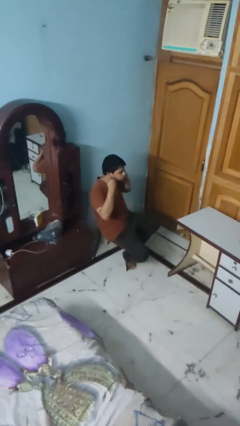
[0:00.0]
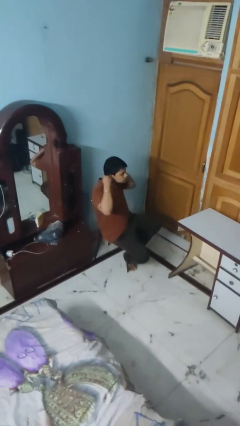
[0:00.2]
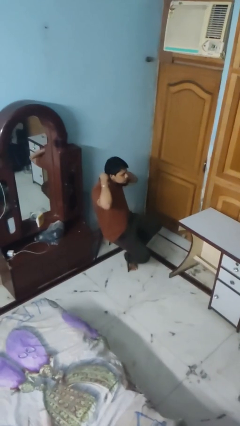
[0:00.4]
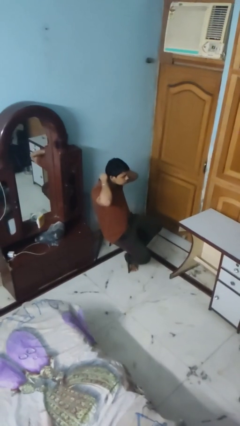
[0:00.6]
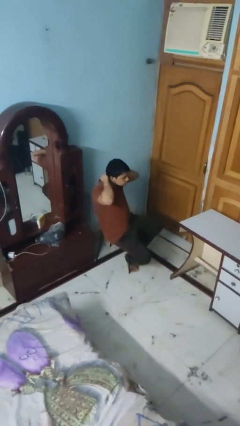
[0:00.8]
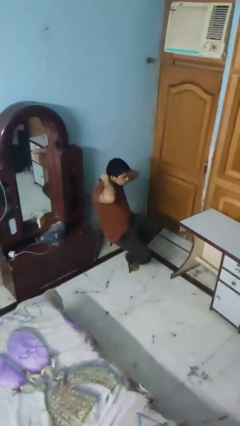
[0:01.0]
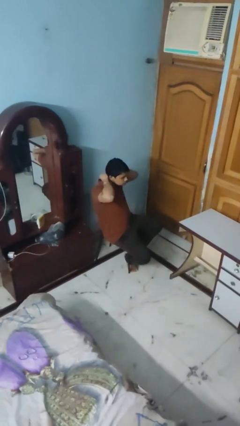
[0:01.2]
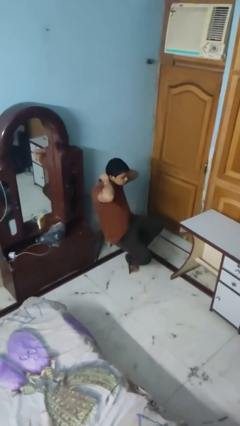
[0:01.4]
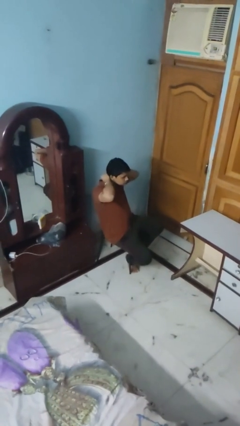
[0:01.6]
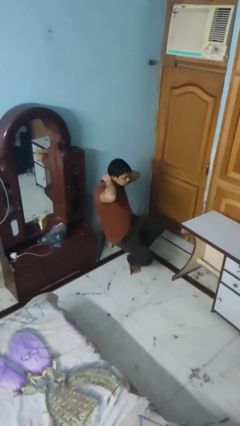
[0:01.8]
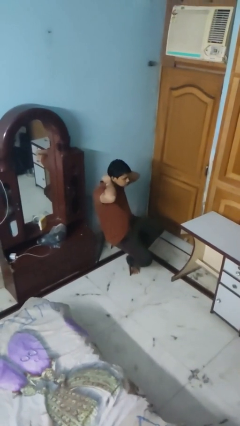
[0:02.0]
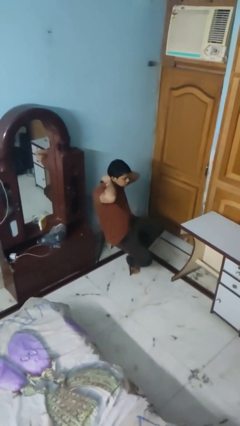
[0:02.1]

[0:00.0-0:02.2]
person puts on necklace

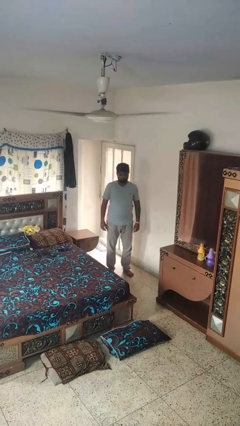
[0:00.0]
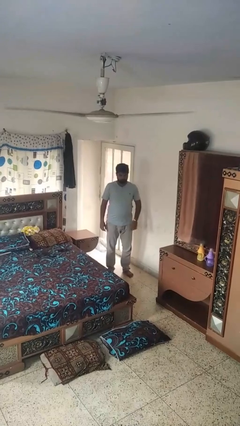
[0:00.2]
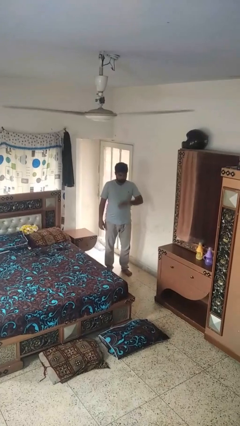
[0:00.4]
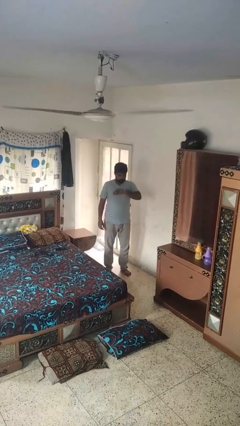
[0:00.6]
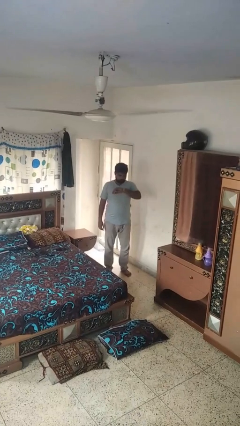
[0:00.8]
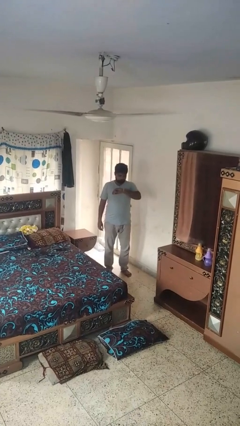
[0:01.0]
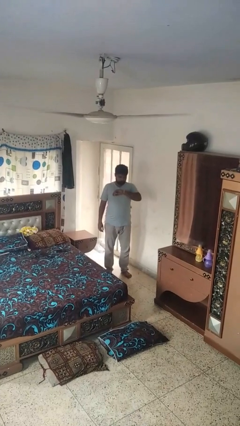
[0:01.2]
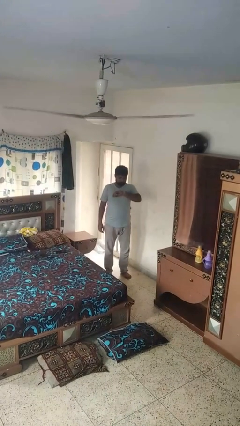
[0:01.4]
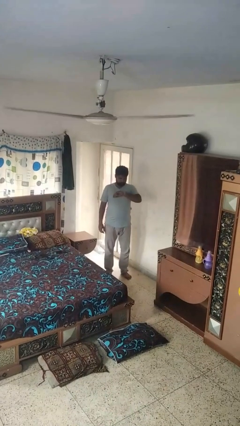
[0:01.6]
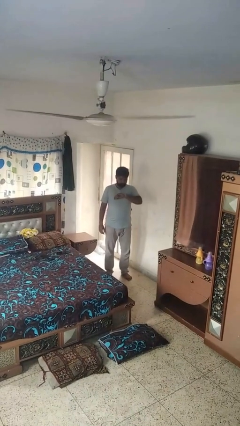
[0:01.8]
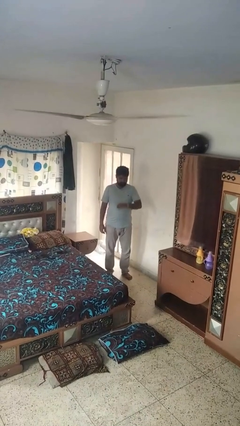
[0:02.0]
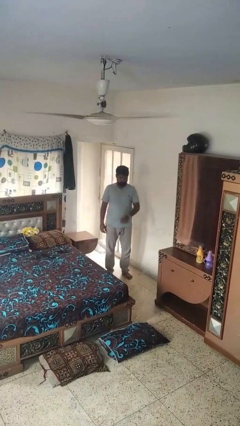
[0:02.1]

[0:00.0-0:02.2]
person looks at wristwatch

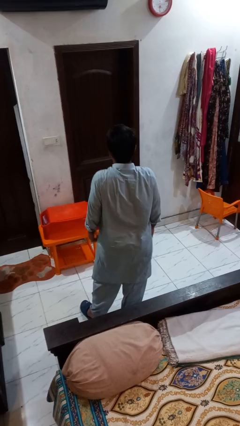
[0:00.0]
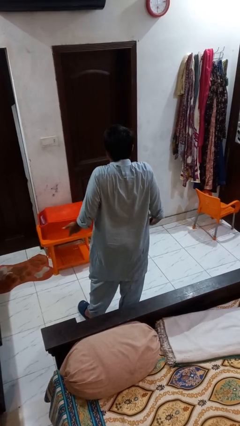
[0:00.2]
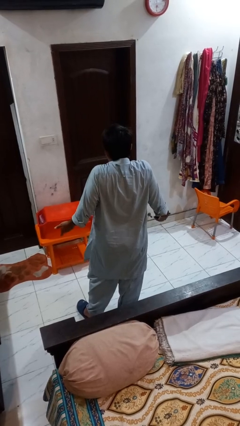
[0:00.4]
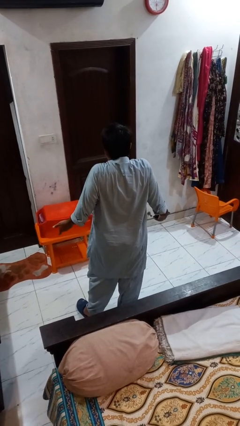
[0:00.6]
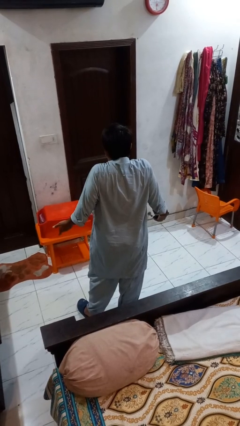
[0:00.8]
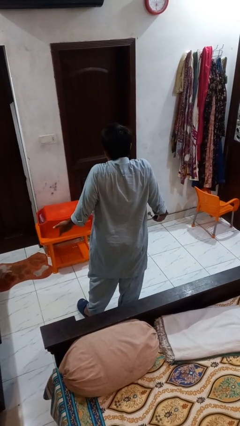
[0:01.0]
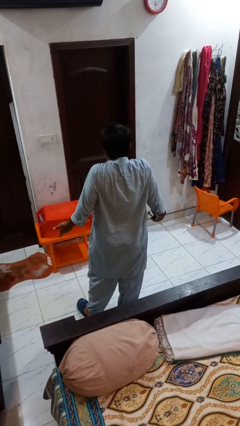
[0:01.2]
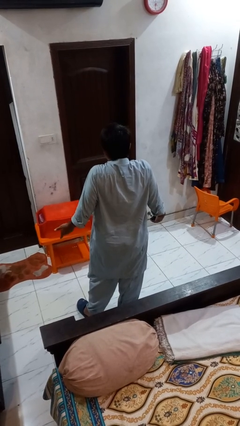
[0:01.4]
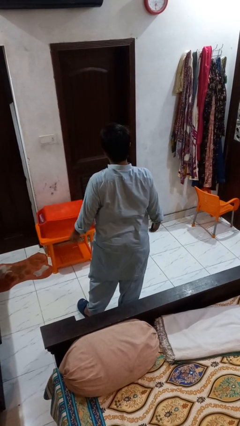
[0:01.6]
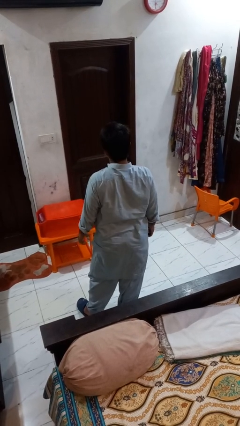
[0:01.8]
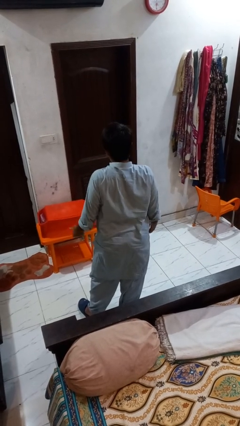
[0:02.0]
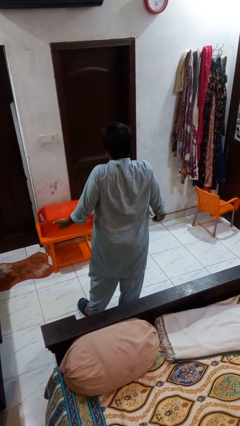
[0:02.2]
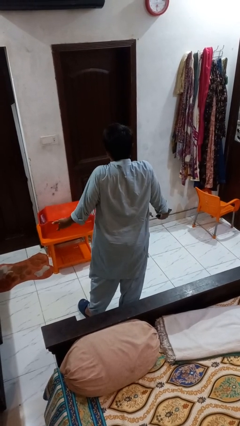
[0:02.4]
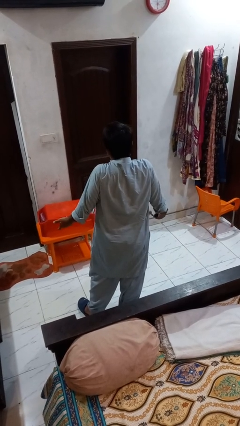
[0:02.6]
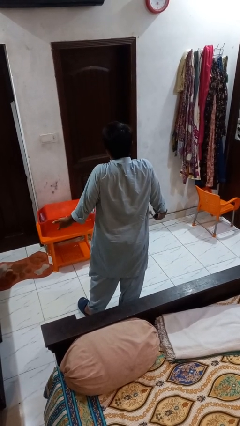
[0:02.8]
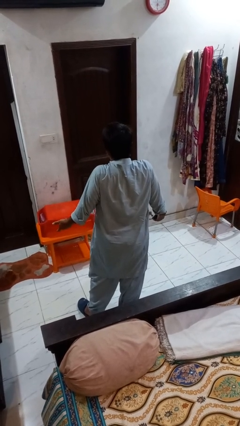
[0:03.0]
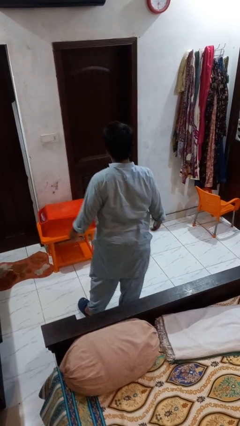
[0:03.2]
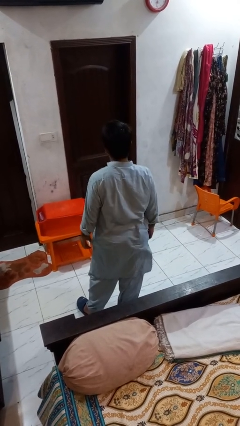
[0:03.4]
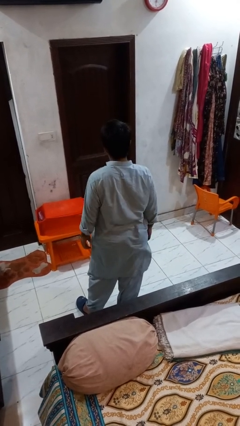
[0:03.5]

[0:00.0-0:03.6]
person shrugs

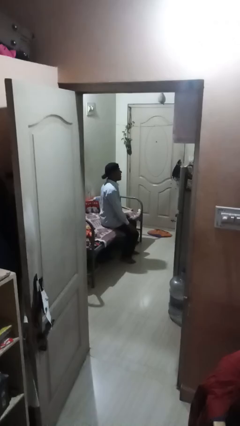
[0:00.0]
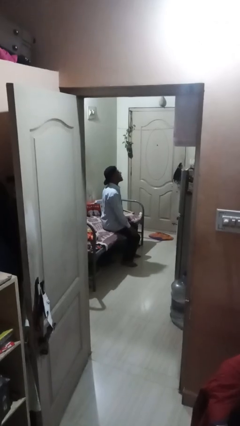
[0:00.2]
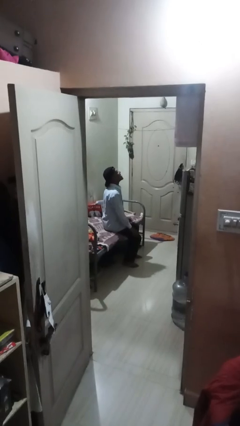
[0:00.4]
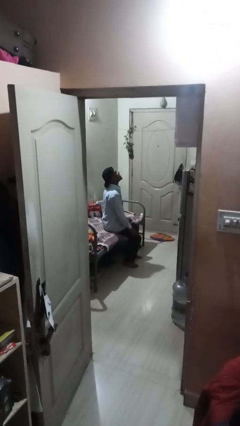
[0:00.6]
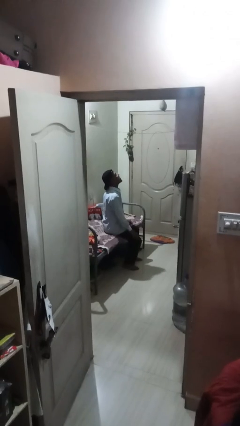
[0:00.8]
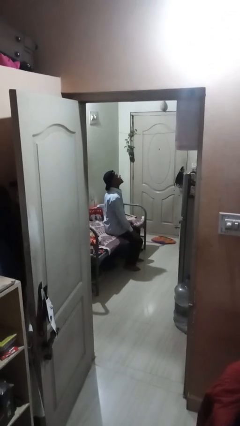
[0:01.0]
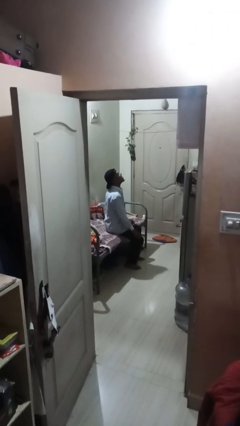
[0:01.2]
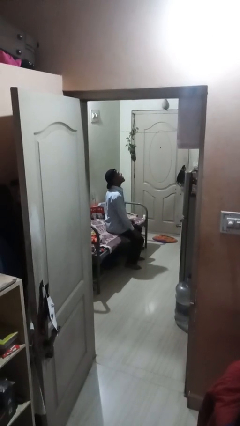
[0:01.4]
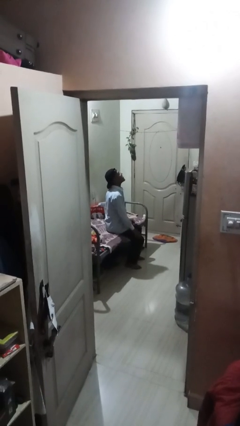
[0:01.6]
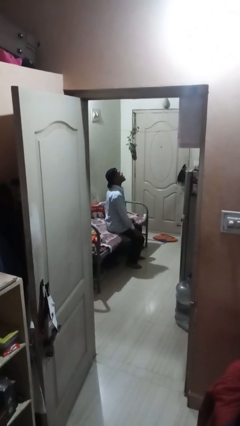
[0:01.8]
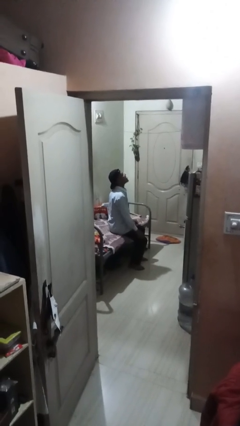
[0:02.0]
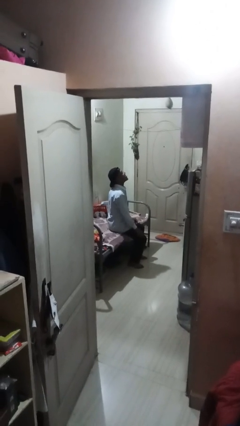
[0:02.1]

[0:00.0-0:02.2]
person sticks out tongue

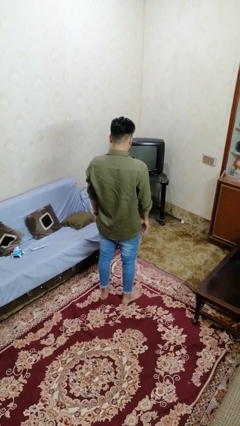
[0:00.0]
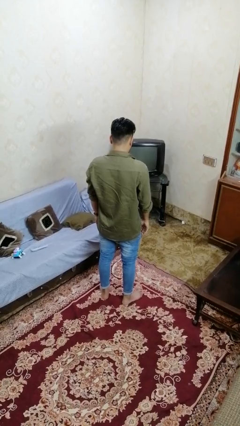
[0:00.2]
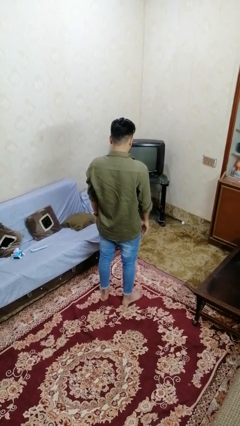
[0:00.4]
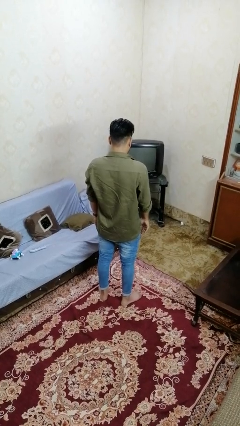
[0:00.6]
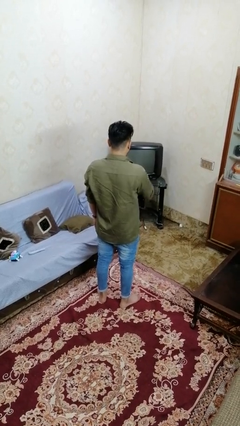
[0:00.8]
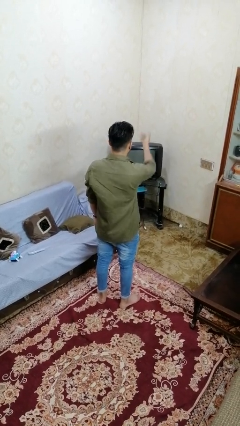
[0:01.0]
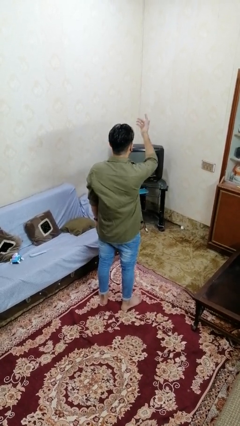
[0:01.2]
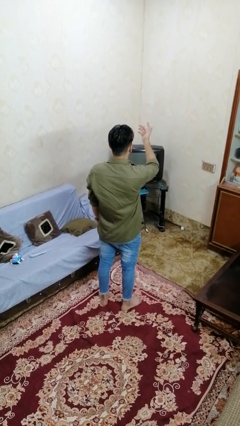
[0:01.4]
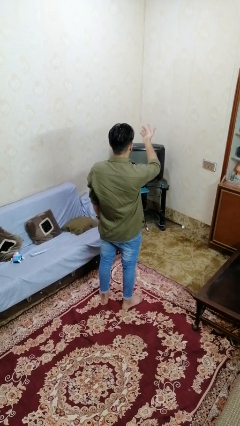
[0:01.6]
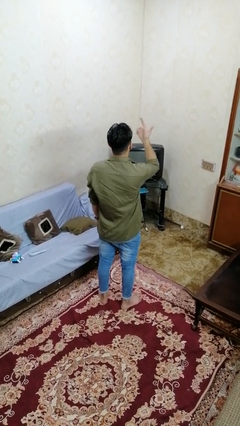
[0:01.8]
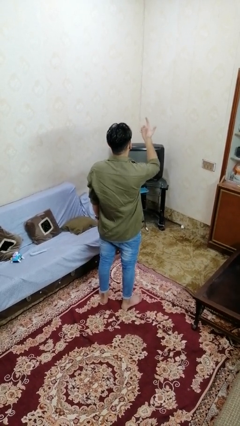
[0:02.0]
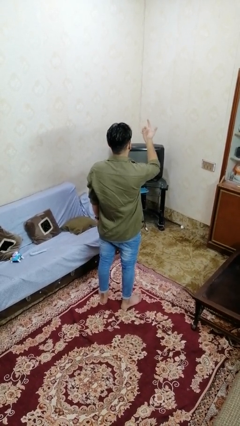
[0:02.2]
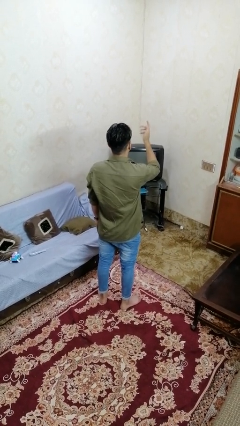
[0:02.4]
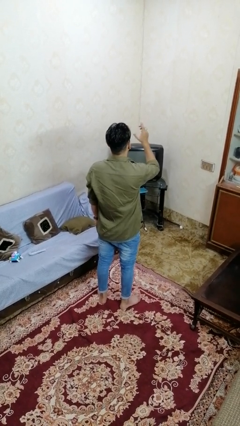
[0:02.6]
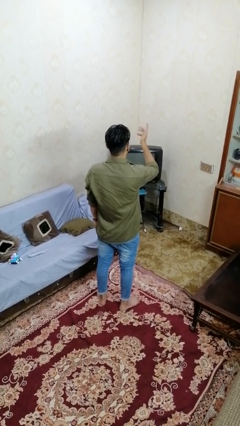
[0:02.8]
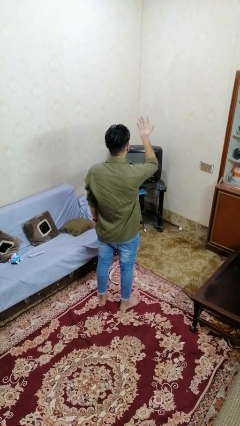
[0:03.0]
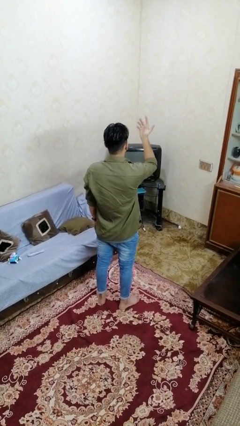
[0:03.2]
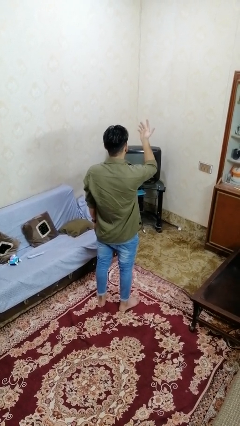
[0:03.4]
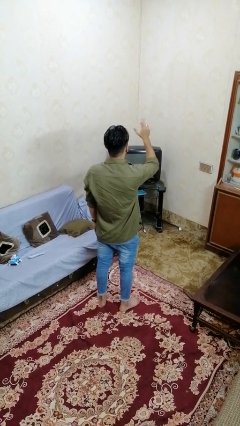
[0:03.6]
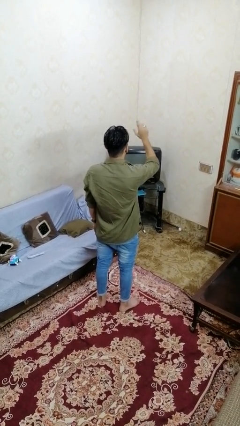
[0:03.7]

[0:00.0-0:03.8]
person gestures raise hand

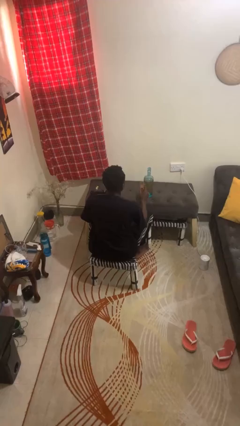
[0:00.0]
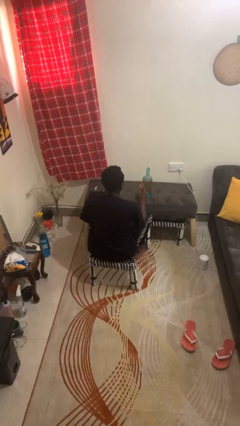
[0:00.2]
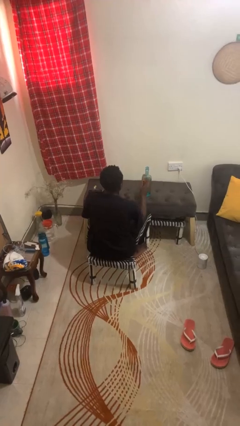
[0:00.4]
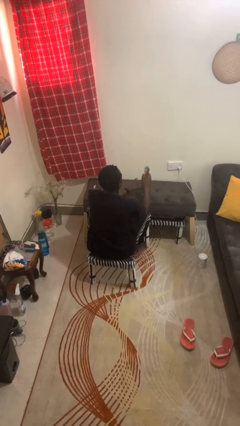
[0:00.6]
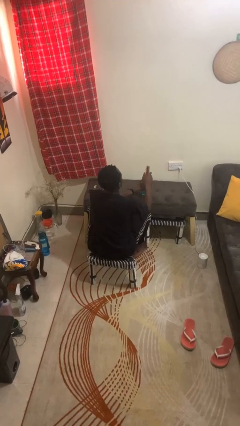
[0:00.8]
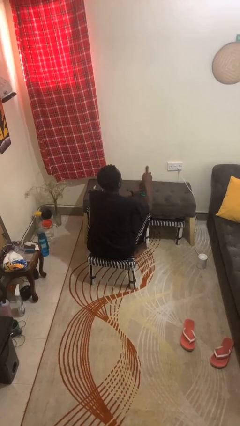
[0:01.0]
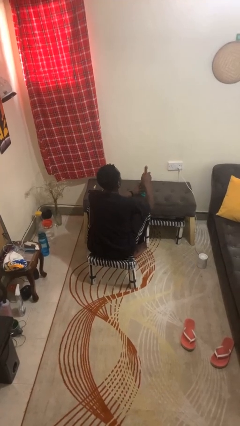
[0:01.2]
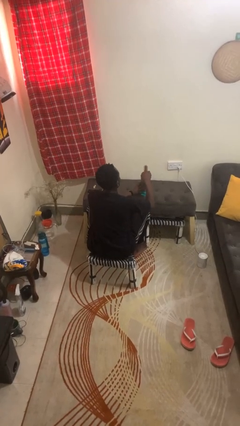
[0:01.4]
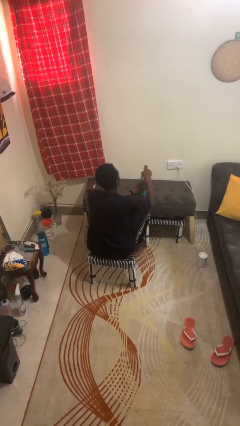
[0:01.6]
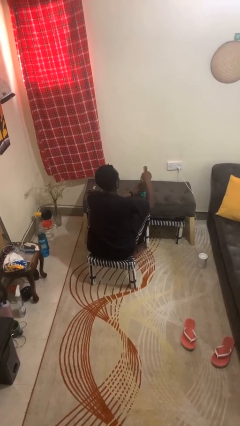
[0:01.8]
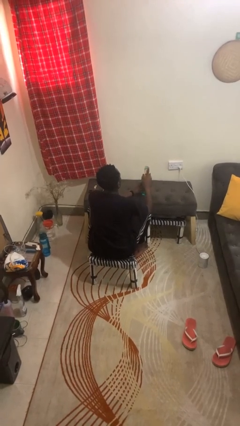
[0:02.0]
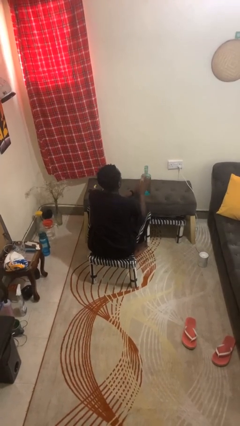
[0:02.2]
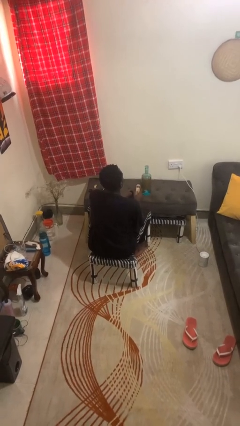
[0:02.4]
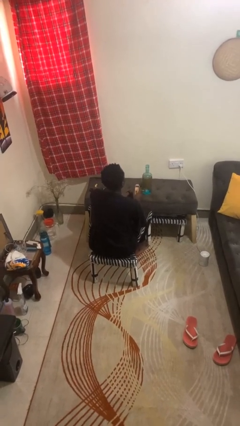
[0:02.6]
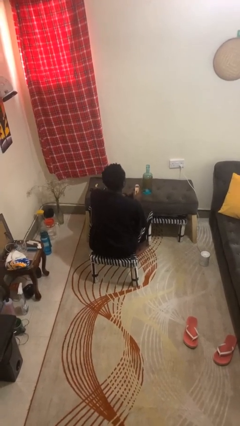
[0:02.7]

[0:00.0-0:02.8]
person opens can with can opener

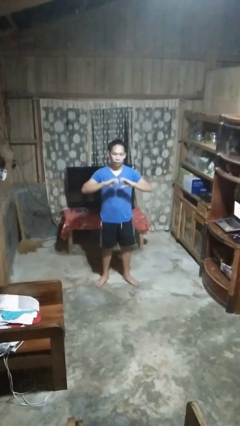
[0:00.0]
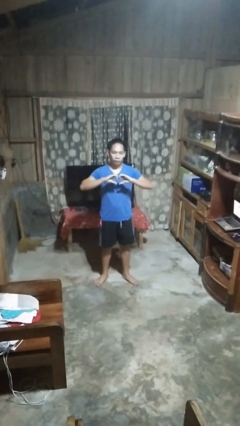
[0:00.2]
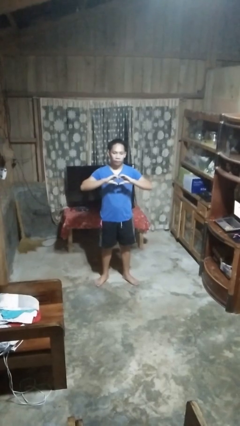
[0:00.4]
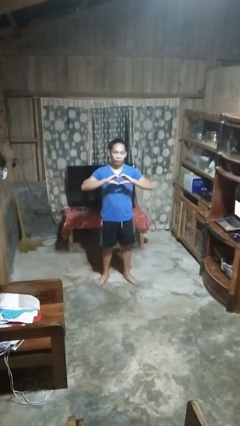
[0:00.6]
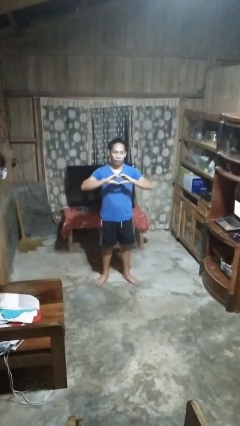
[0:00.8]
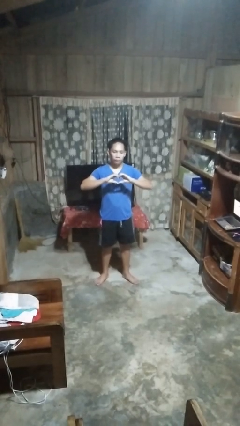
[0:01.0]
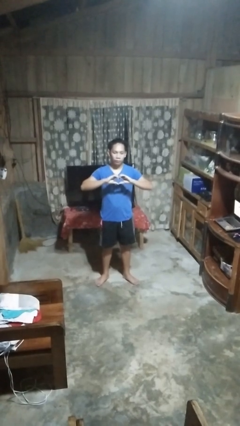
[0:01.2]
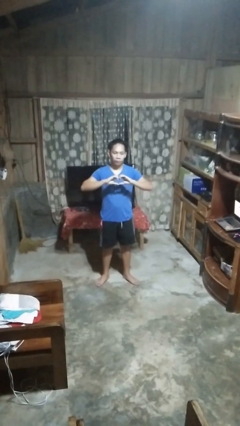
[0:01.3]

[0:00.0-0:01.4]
person gestures heart
